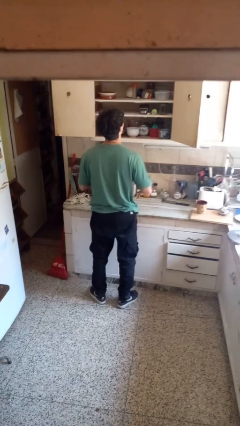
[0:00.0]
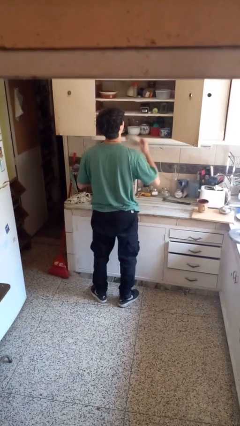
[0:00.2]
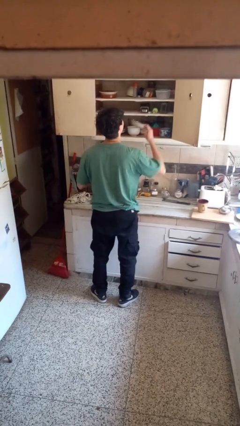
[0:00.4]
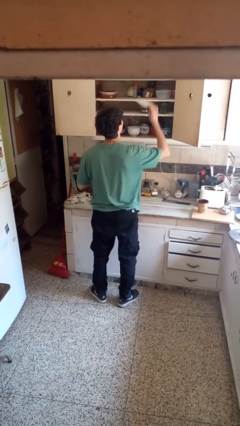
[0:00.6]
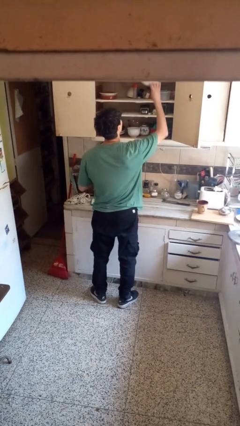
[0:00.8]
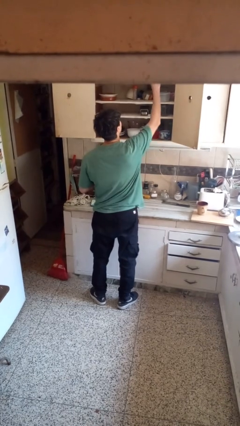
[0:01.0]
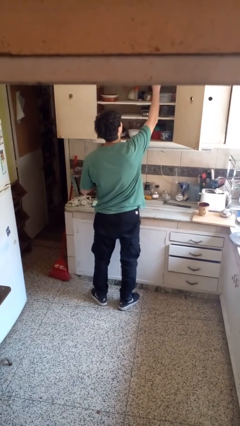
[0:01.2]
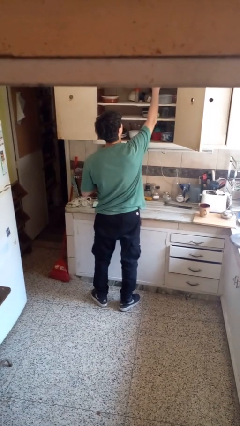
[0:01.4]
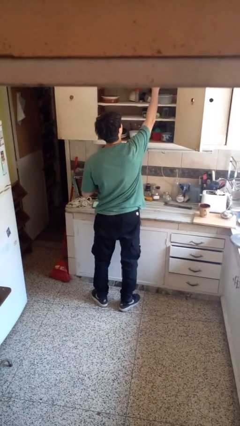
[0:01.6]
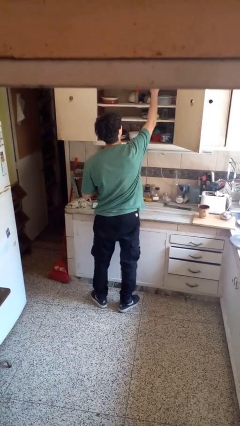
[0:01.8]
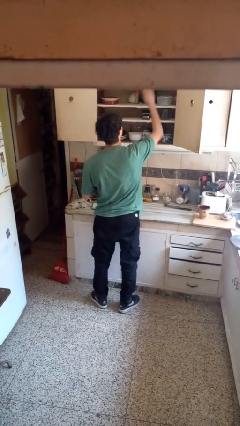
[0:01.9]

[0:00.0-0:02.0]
person puts object in cabinet

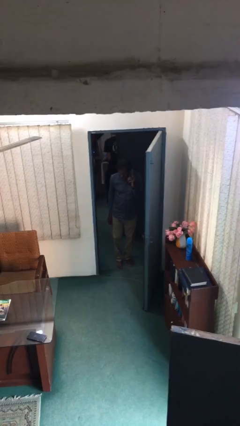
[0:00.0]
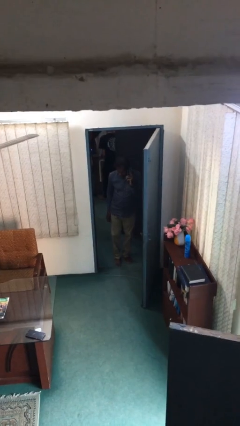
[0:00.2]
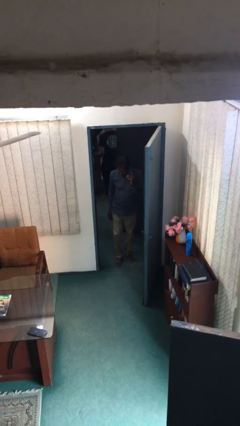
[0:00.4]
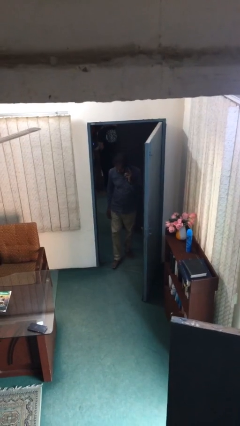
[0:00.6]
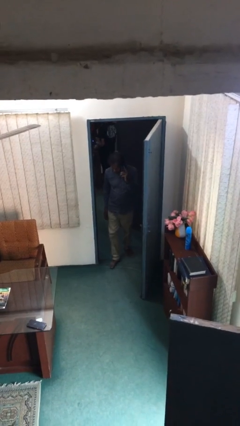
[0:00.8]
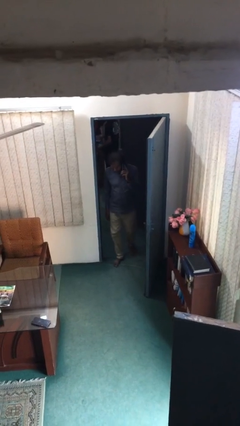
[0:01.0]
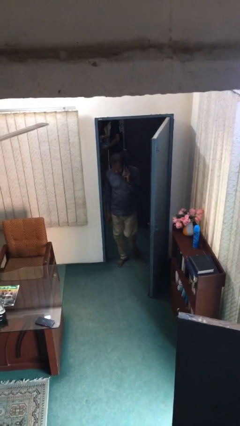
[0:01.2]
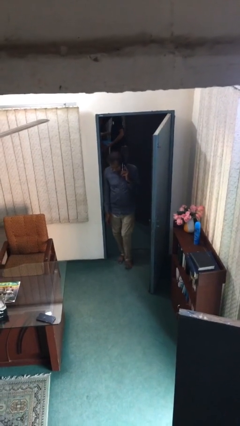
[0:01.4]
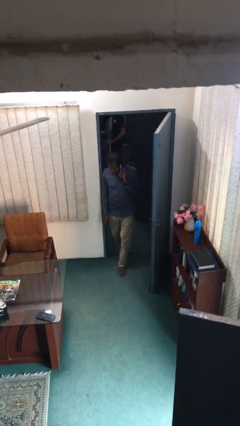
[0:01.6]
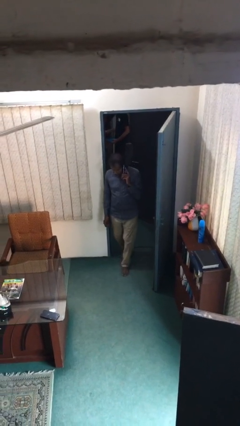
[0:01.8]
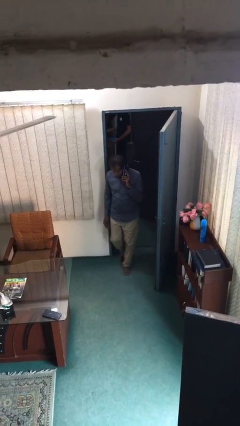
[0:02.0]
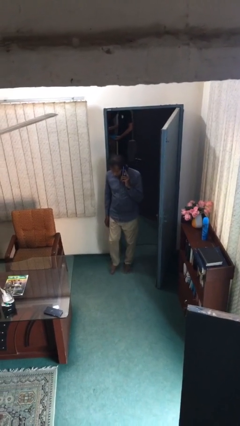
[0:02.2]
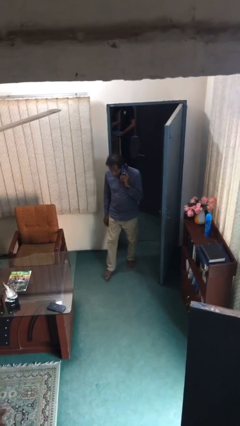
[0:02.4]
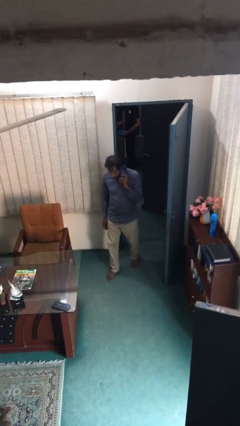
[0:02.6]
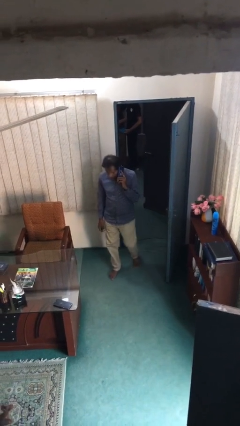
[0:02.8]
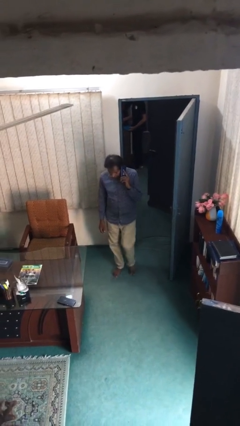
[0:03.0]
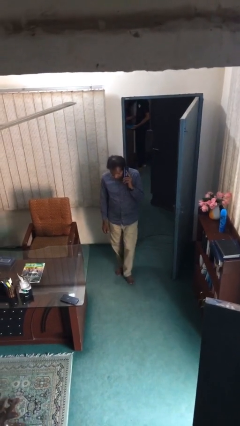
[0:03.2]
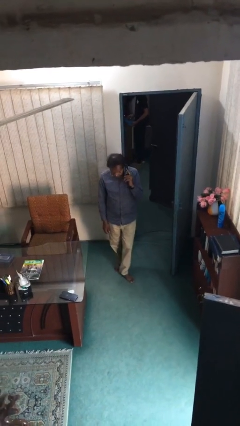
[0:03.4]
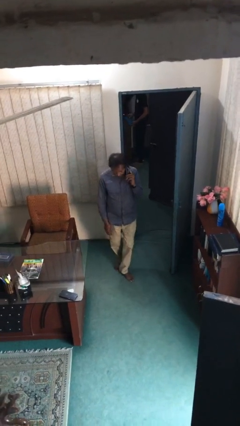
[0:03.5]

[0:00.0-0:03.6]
person enters scene through structure

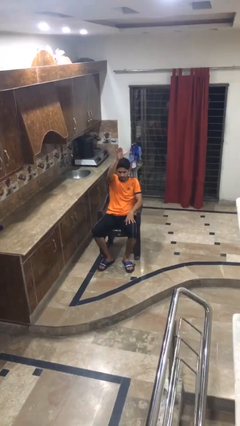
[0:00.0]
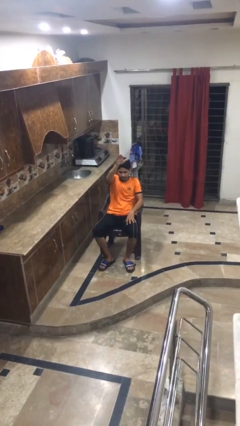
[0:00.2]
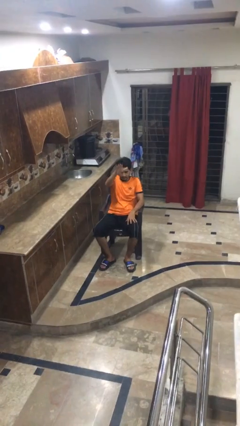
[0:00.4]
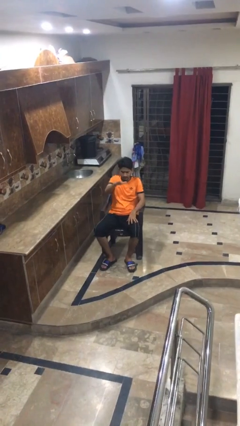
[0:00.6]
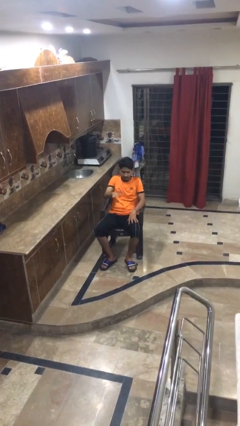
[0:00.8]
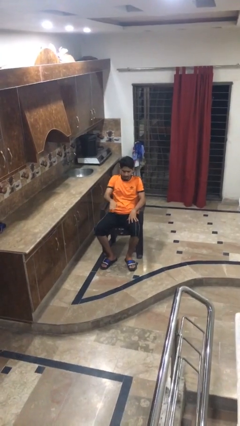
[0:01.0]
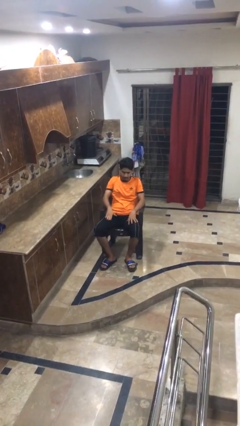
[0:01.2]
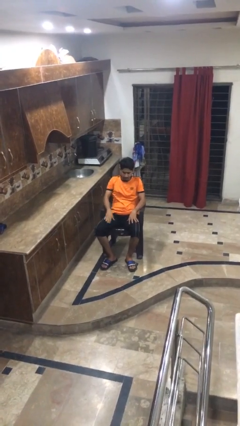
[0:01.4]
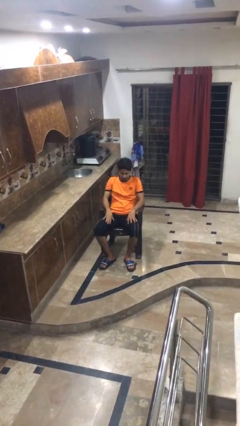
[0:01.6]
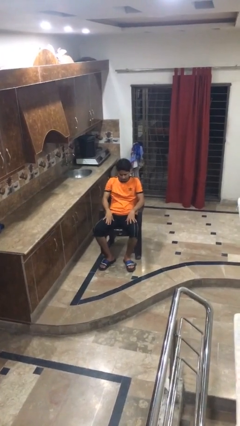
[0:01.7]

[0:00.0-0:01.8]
person gestures swipe down

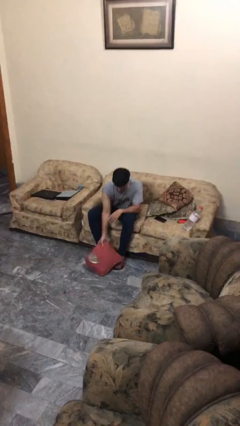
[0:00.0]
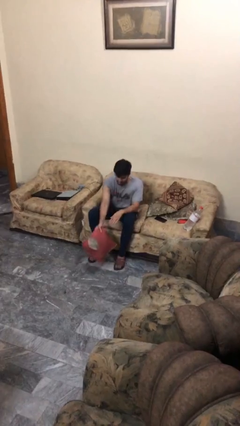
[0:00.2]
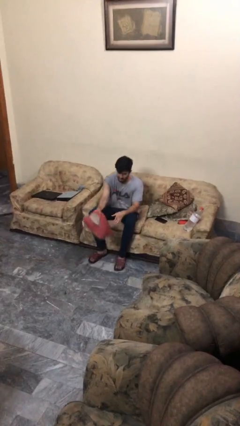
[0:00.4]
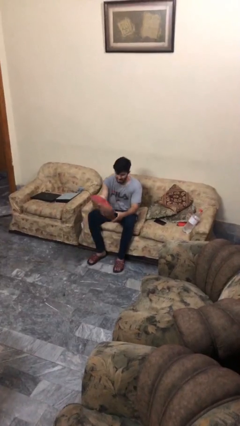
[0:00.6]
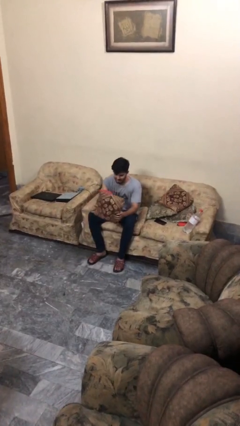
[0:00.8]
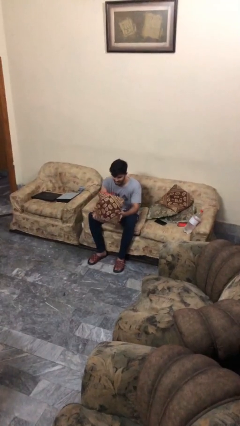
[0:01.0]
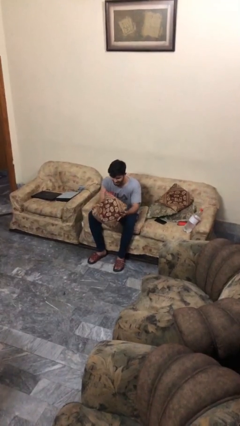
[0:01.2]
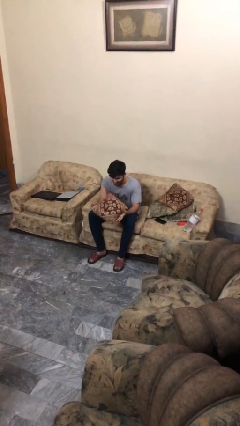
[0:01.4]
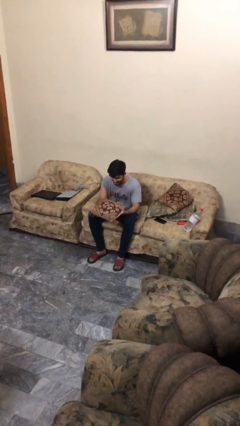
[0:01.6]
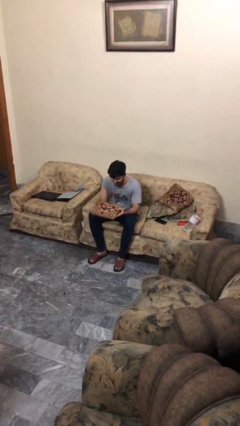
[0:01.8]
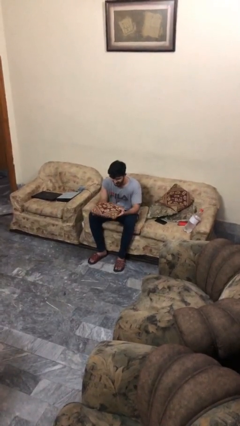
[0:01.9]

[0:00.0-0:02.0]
person picks up object from floor

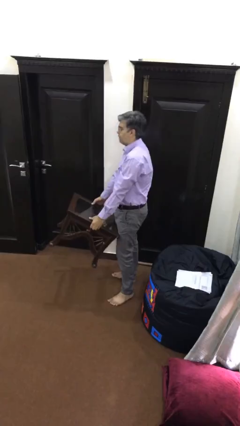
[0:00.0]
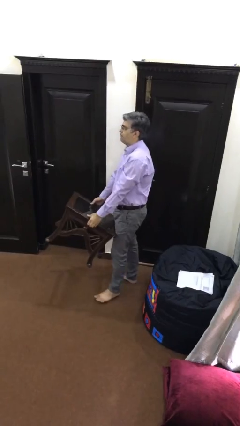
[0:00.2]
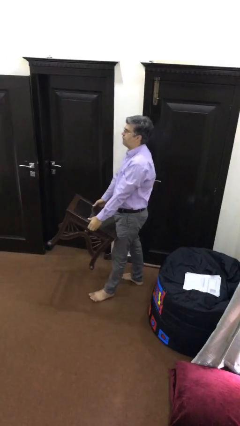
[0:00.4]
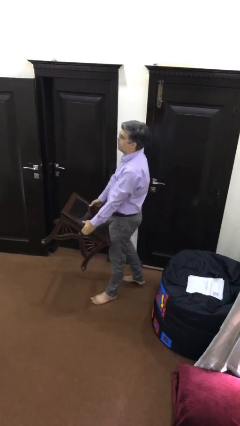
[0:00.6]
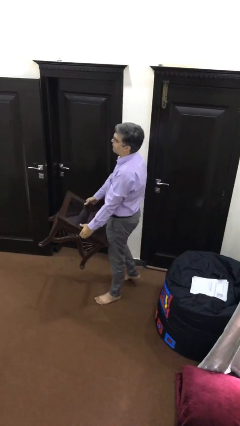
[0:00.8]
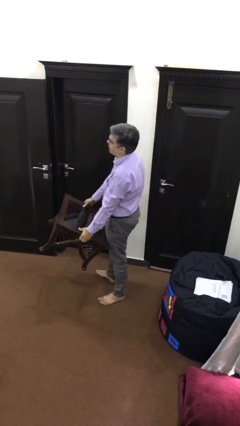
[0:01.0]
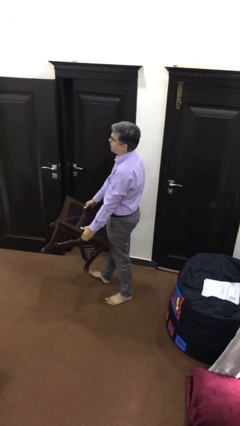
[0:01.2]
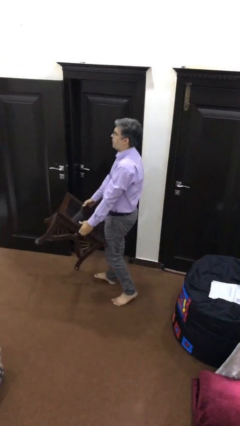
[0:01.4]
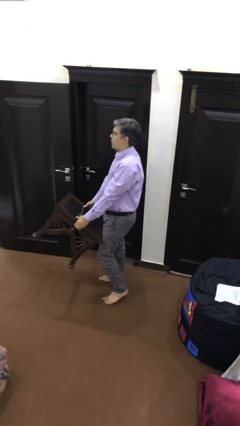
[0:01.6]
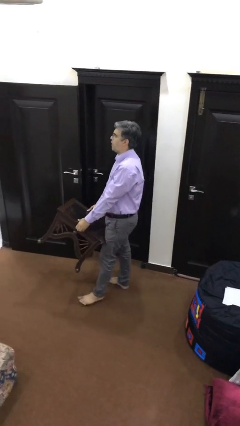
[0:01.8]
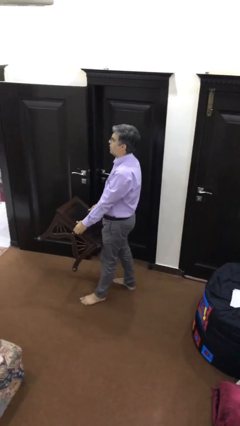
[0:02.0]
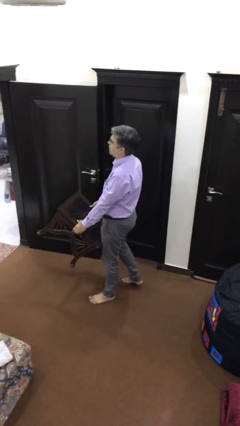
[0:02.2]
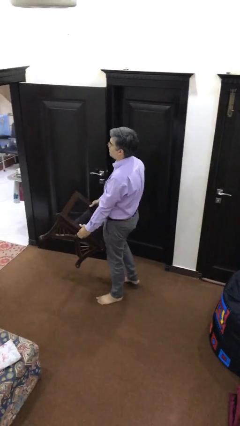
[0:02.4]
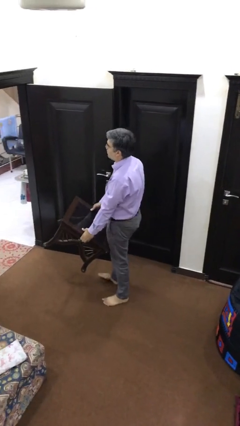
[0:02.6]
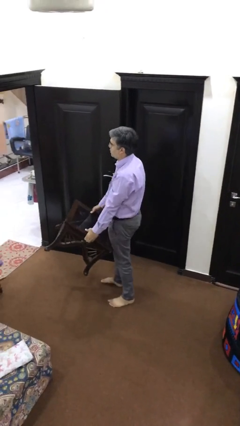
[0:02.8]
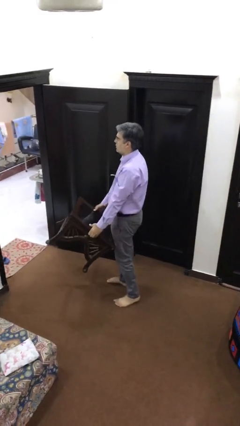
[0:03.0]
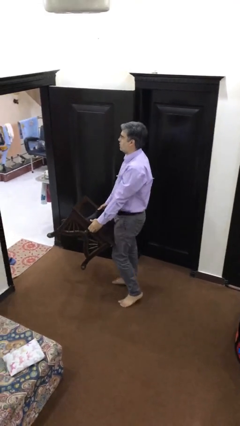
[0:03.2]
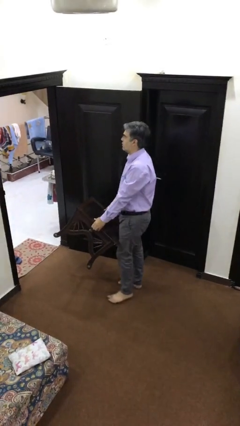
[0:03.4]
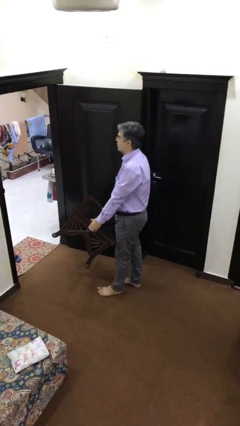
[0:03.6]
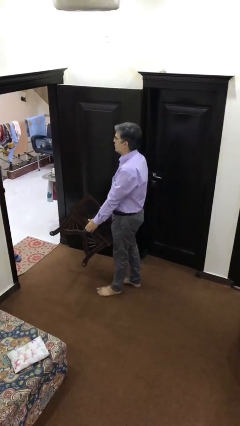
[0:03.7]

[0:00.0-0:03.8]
person carries heavy object

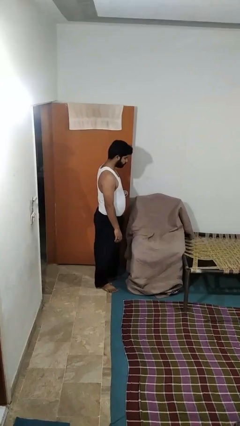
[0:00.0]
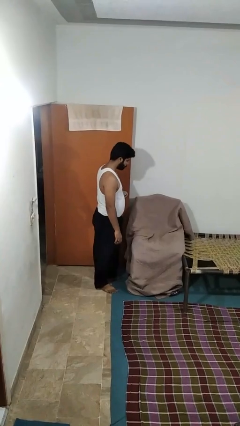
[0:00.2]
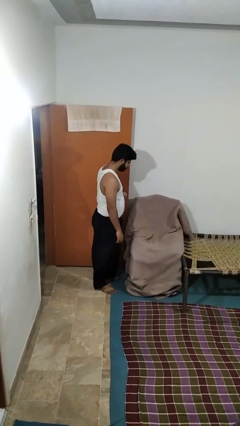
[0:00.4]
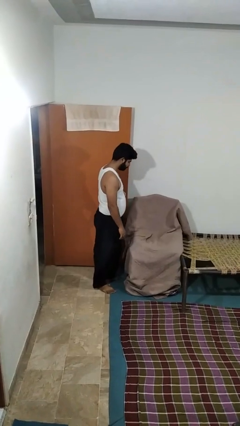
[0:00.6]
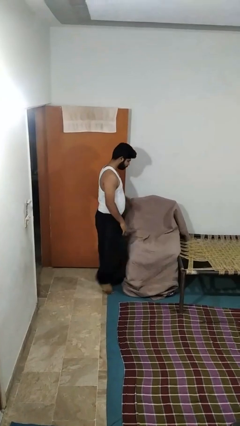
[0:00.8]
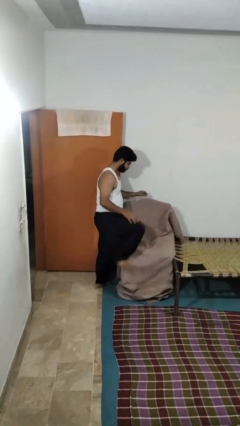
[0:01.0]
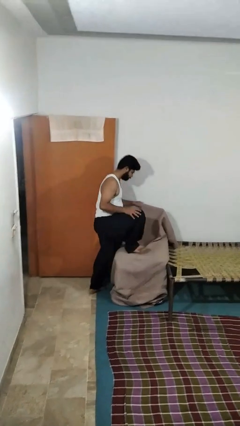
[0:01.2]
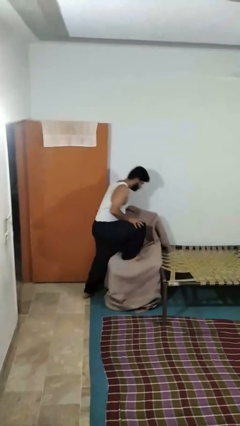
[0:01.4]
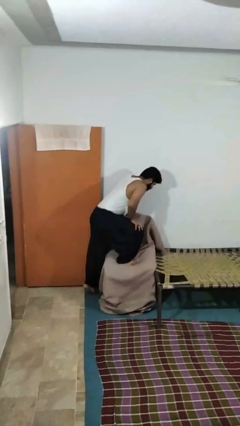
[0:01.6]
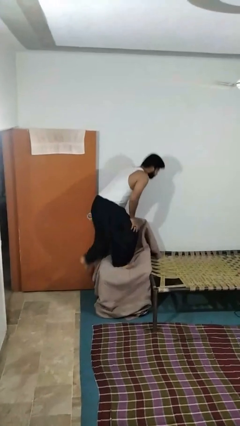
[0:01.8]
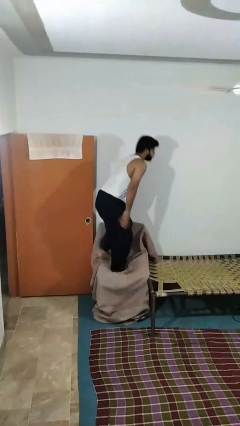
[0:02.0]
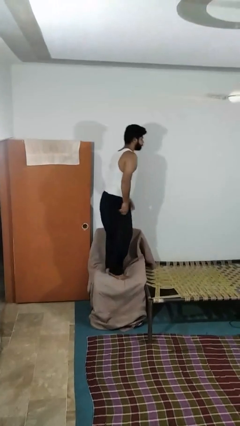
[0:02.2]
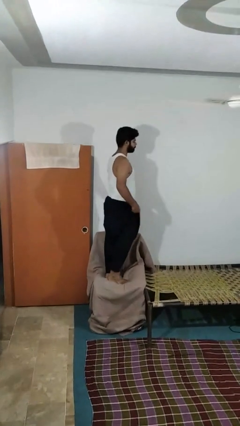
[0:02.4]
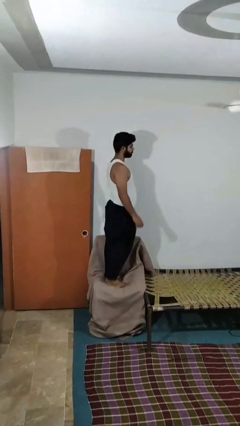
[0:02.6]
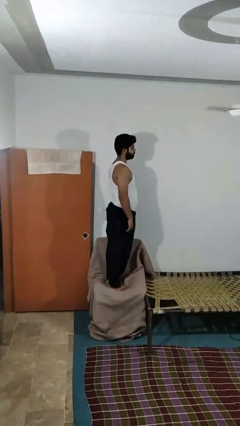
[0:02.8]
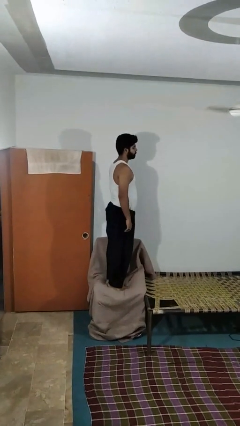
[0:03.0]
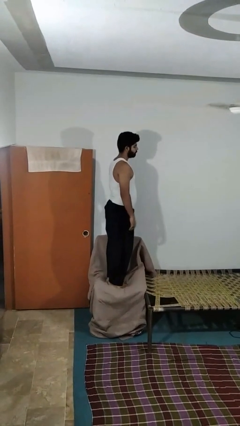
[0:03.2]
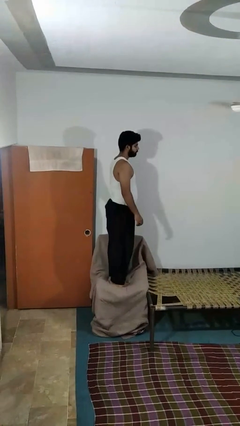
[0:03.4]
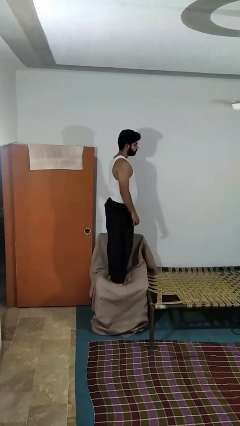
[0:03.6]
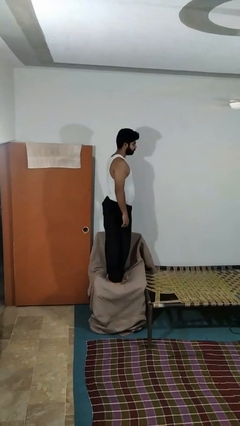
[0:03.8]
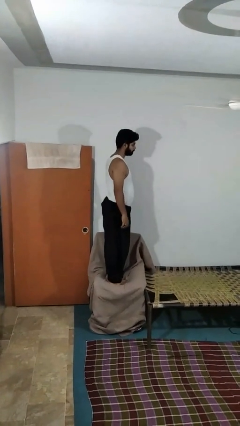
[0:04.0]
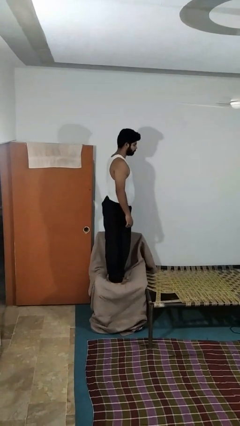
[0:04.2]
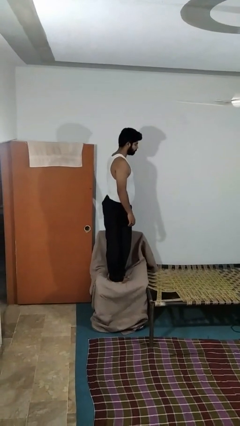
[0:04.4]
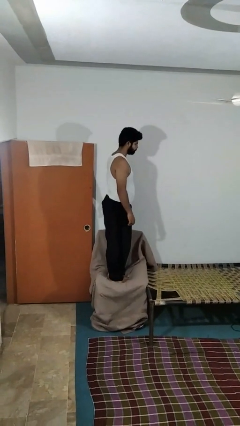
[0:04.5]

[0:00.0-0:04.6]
person climbs on couch
